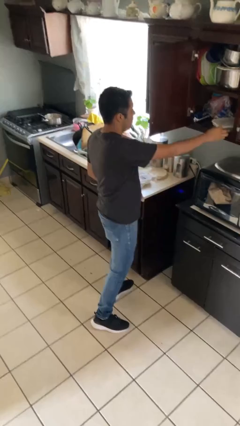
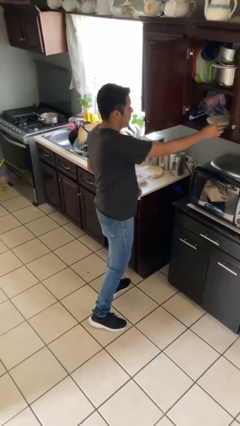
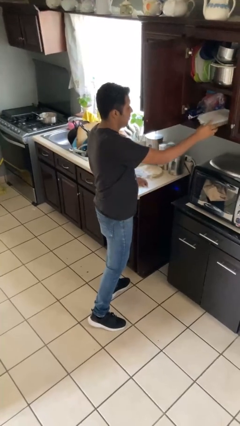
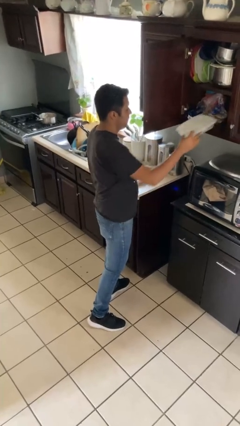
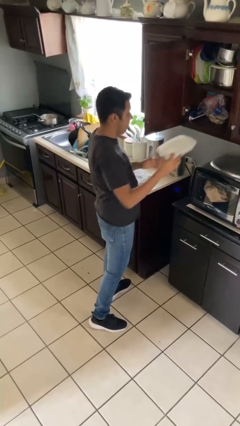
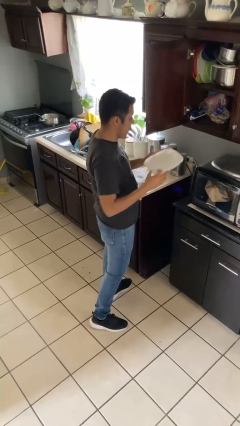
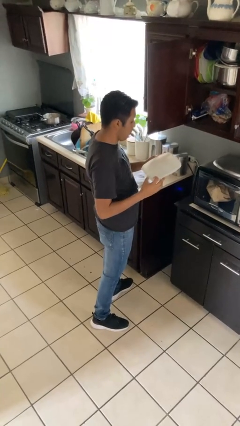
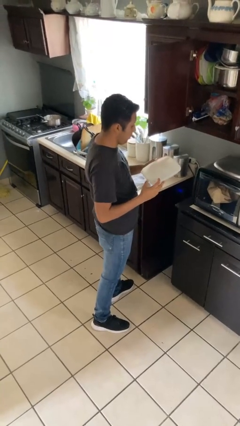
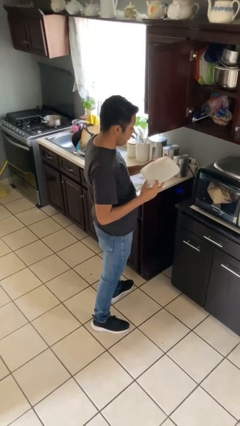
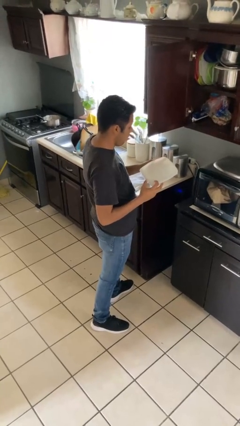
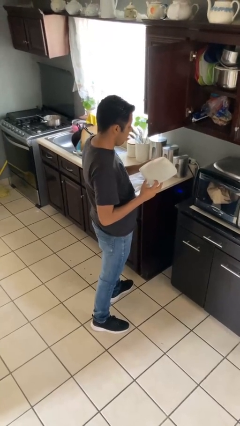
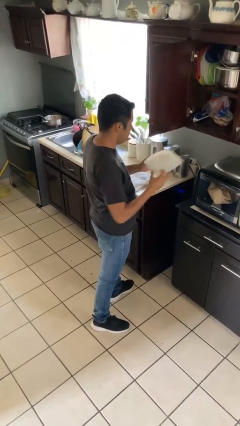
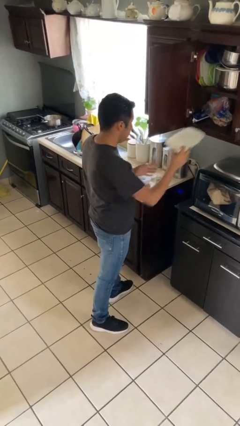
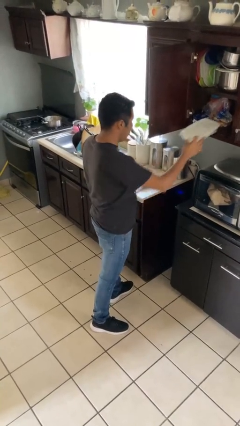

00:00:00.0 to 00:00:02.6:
person picks up object from cabinet

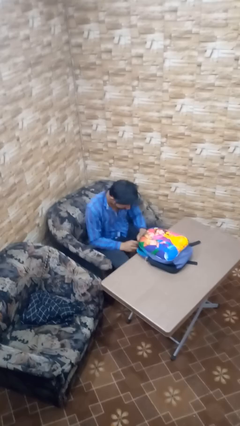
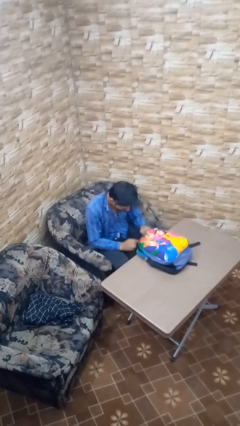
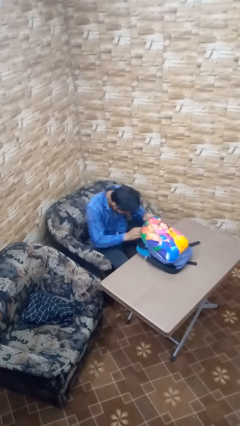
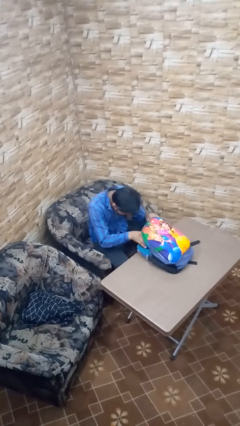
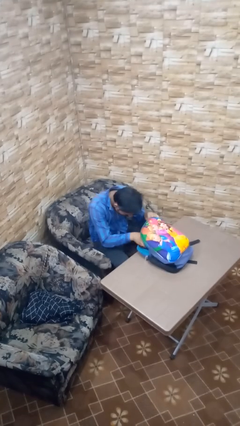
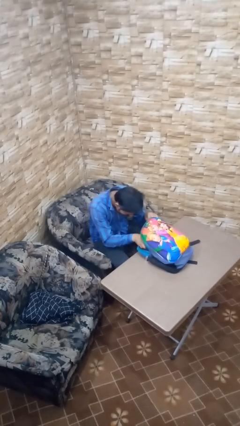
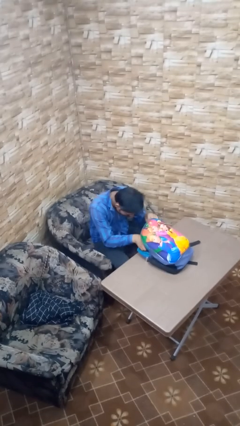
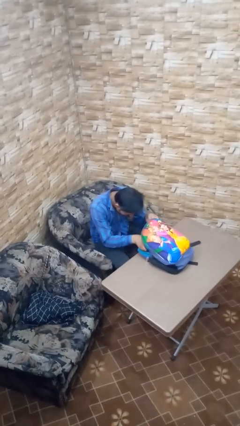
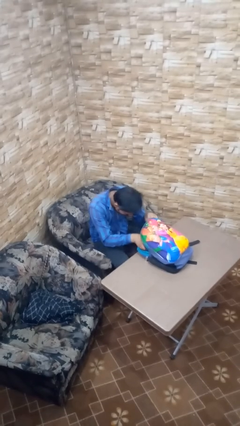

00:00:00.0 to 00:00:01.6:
person searches in backpack

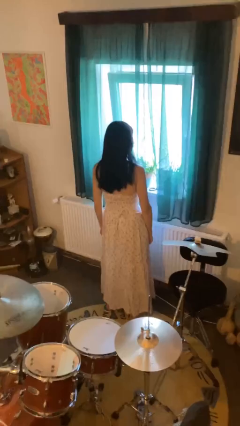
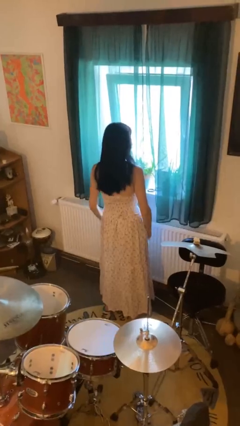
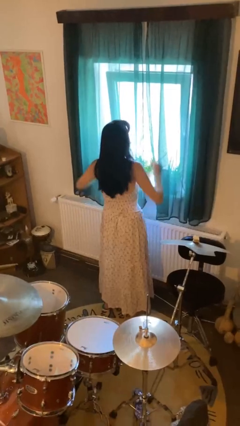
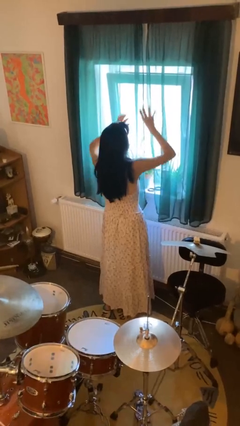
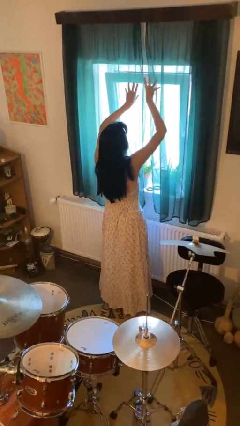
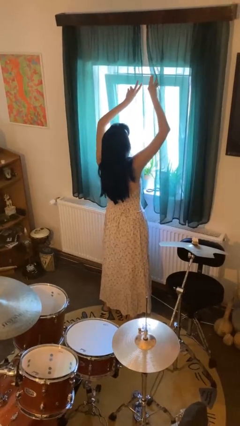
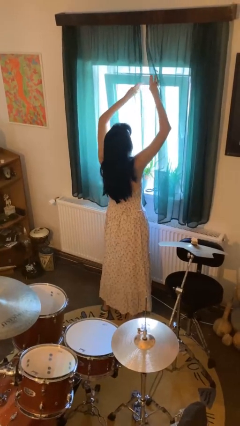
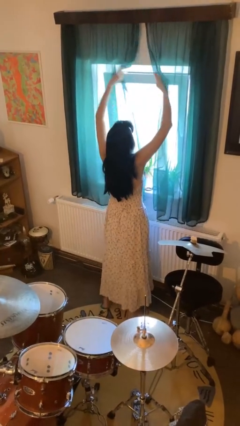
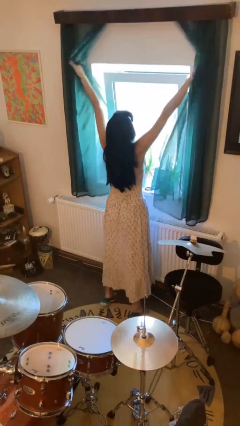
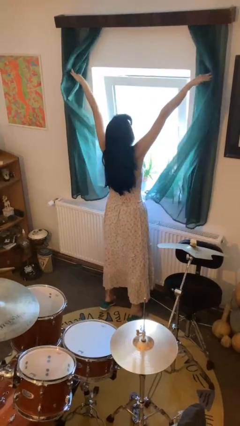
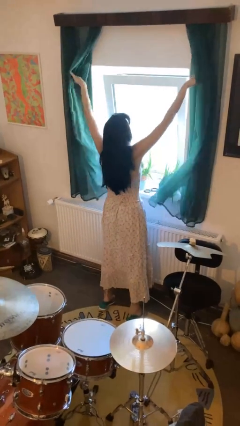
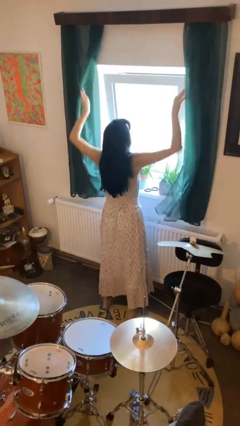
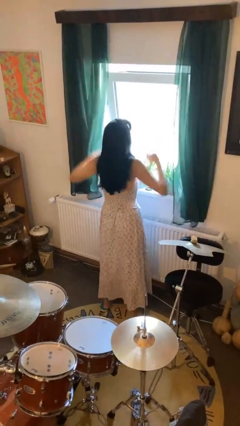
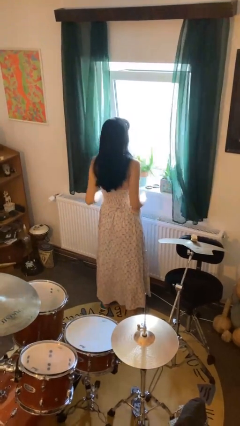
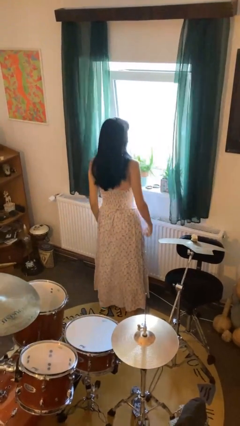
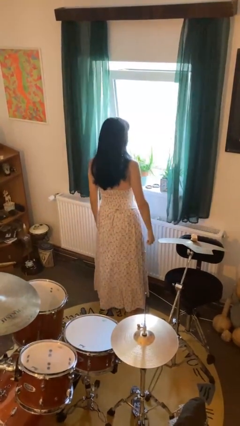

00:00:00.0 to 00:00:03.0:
person opens curtains

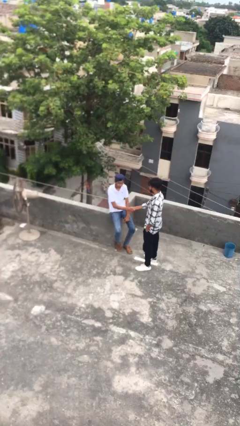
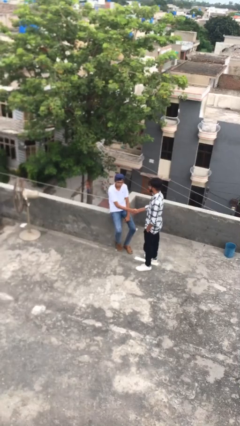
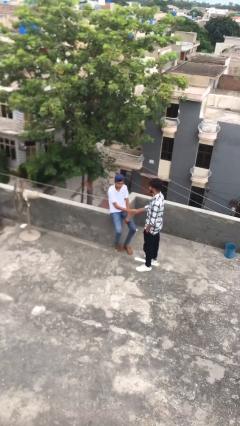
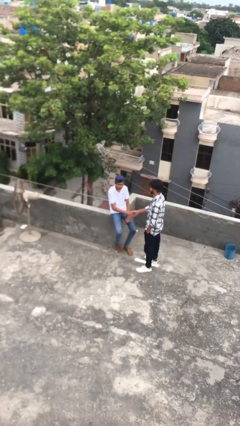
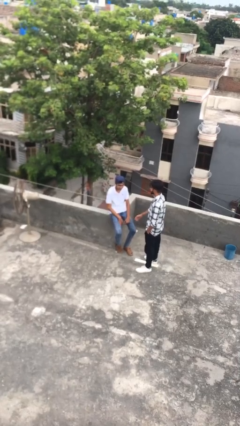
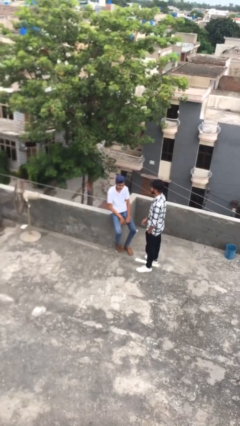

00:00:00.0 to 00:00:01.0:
person shakes hand

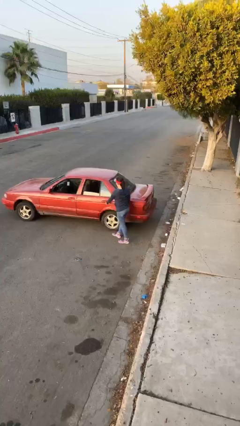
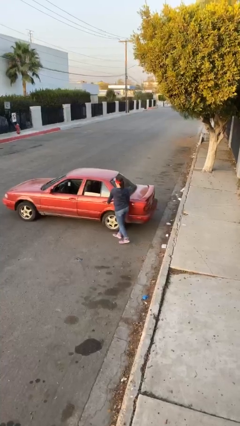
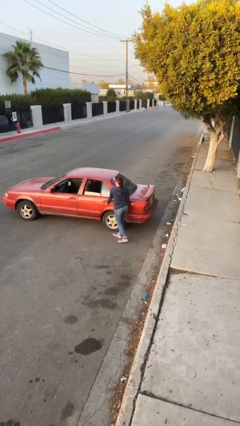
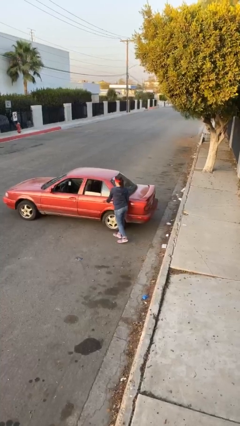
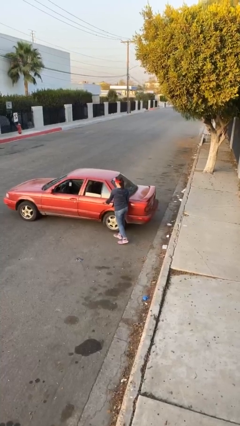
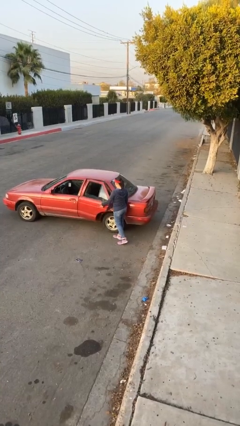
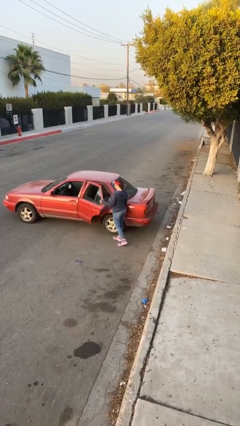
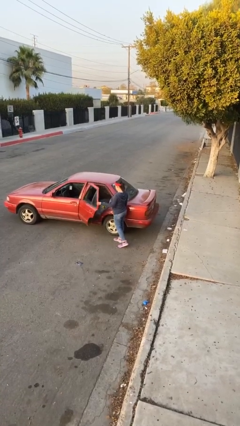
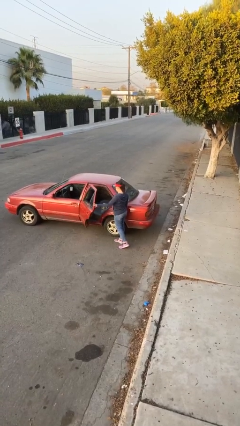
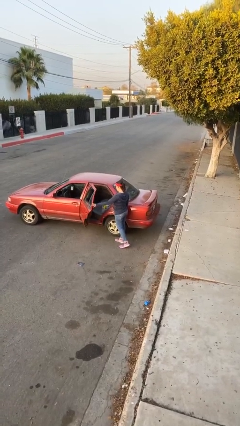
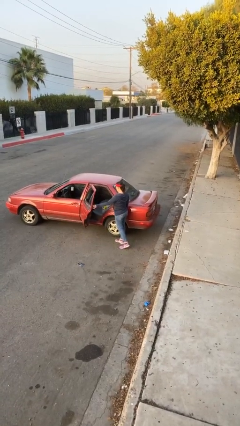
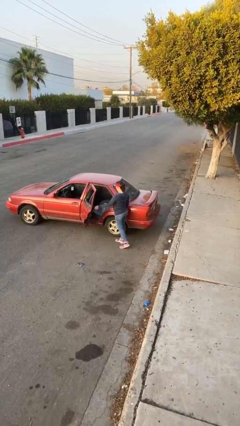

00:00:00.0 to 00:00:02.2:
person opens car door

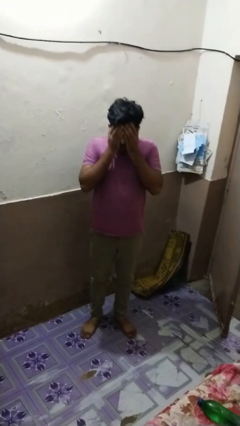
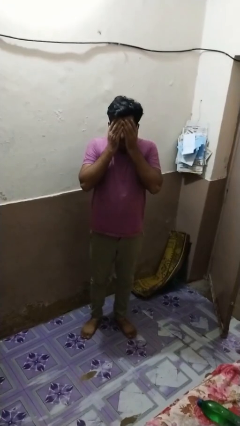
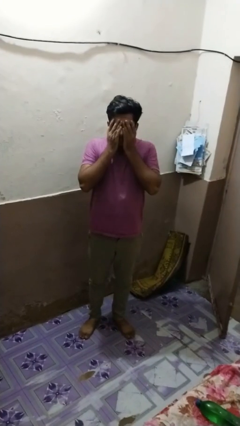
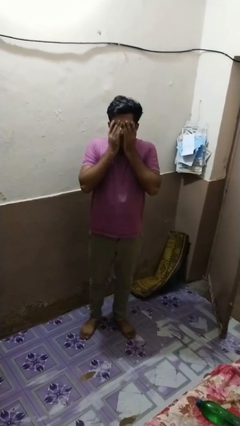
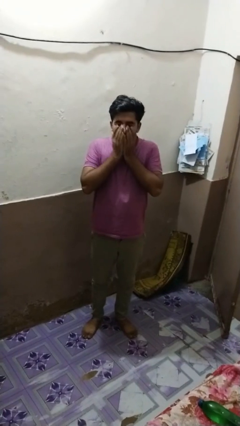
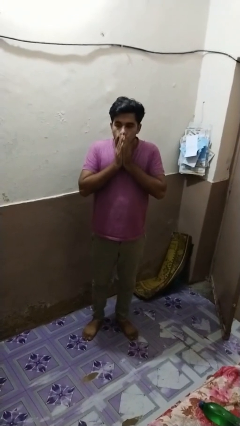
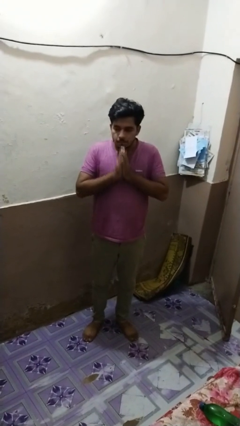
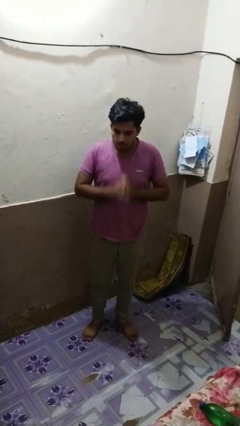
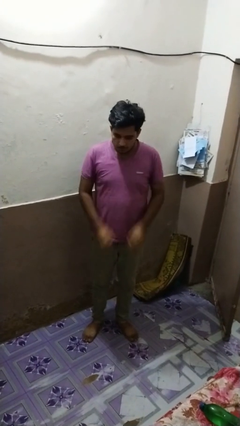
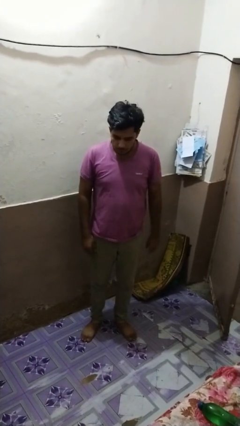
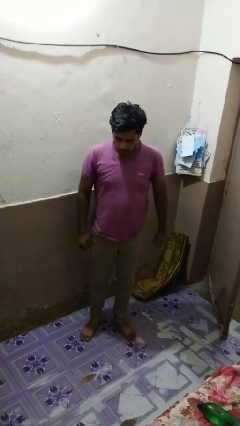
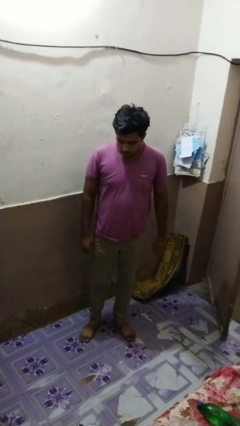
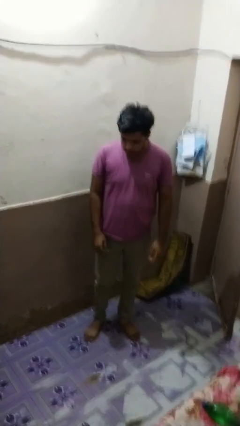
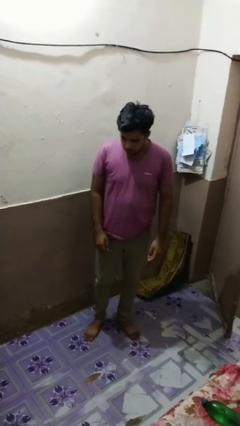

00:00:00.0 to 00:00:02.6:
person covers face with hands

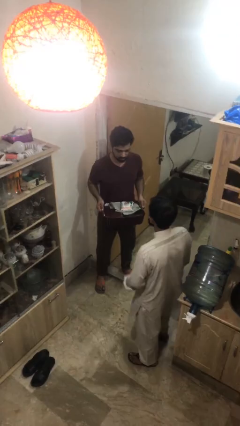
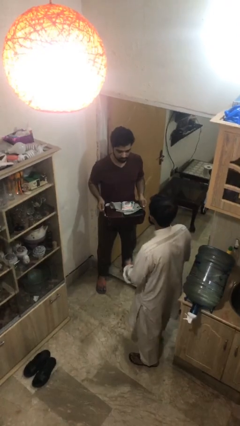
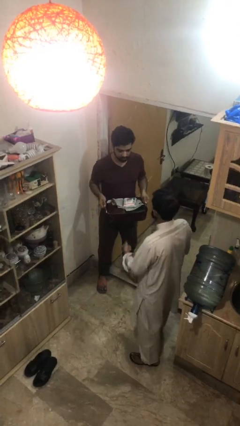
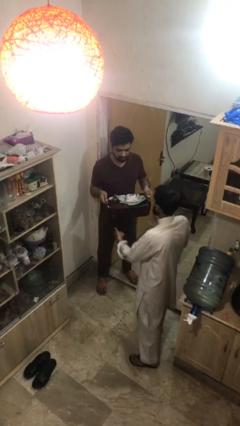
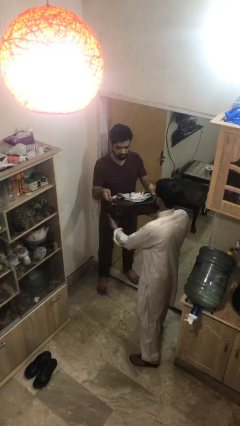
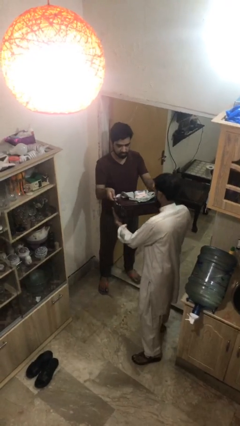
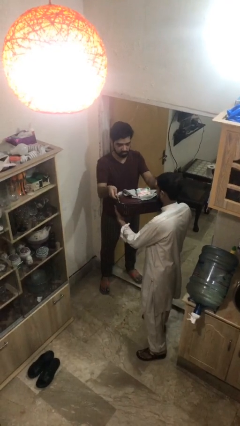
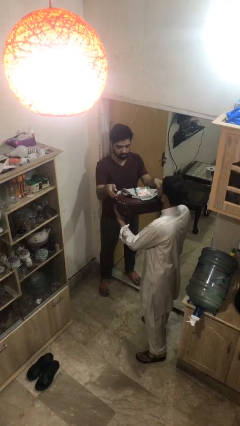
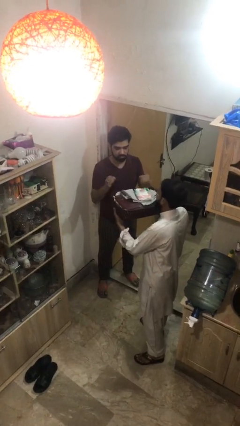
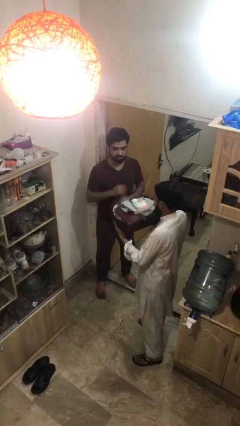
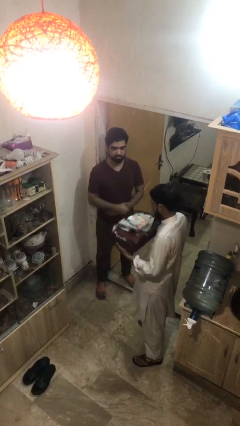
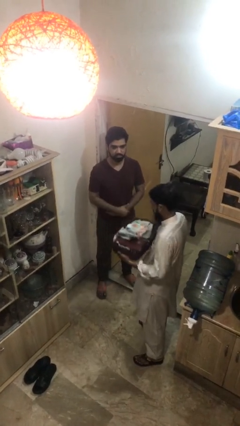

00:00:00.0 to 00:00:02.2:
person transfers object to person

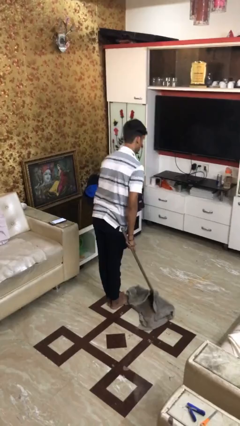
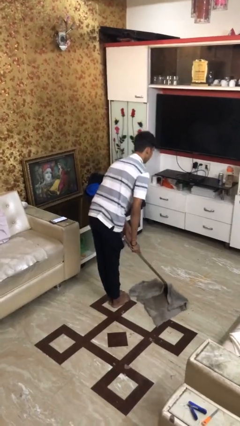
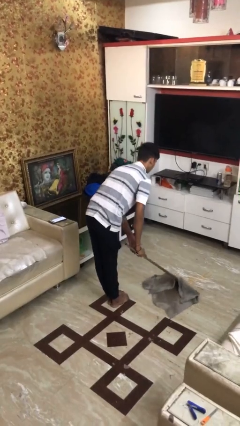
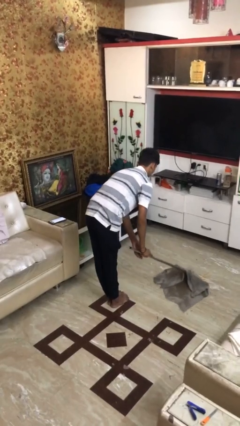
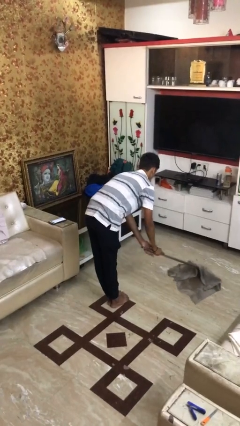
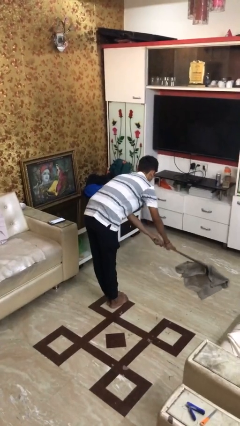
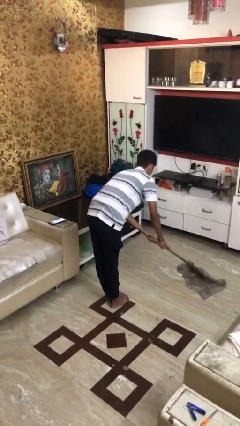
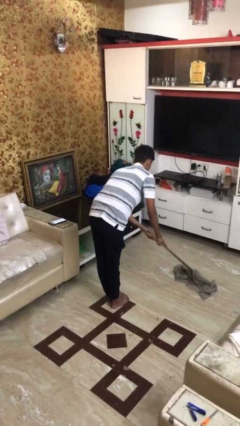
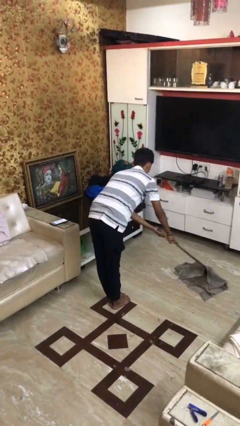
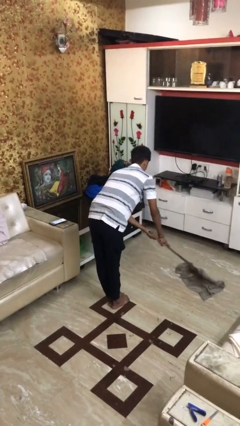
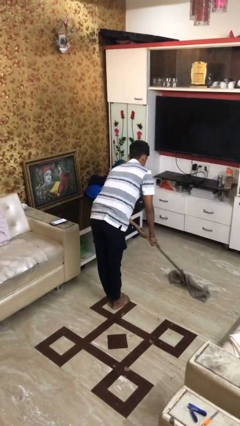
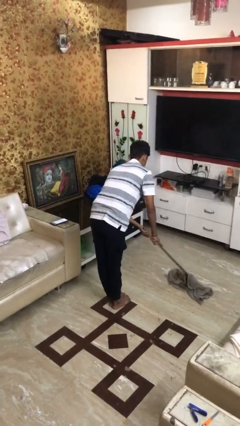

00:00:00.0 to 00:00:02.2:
person mops
